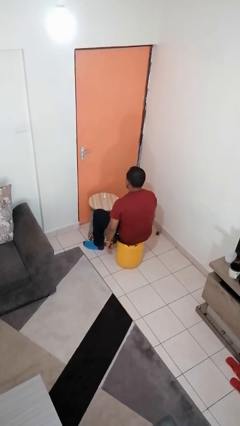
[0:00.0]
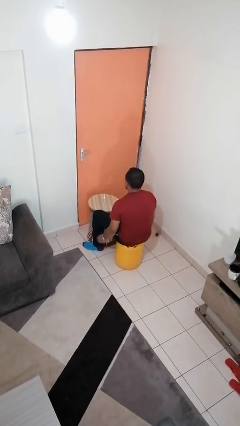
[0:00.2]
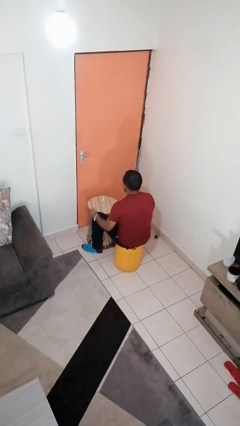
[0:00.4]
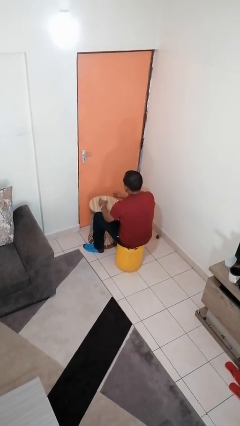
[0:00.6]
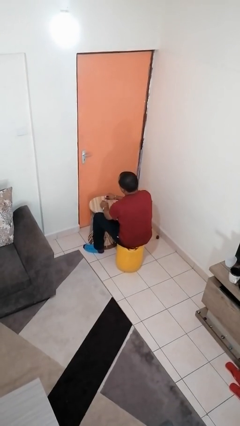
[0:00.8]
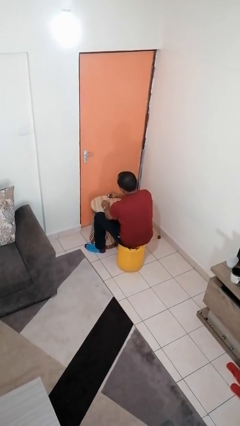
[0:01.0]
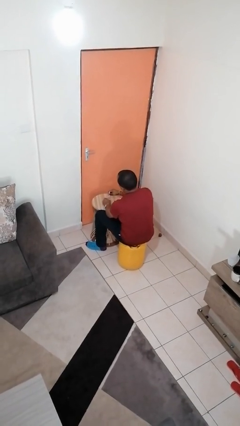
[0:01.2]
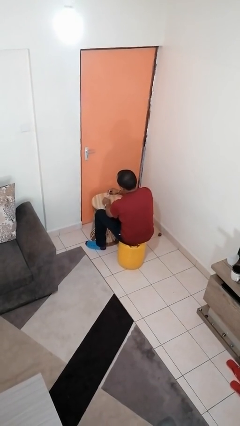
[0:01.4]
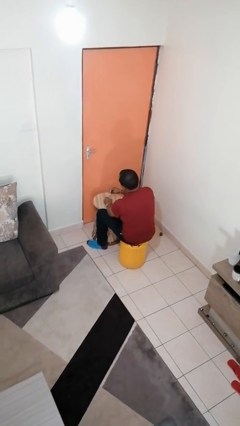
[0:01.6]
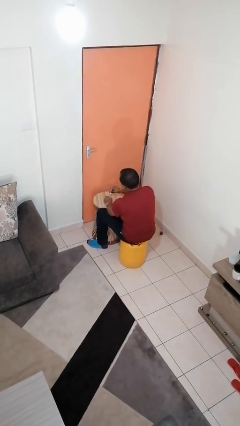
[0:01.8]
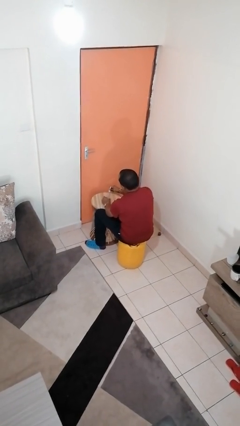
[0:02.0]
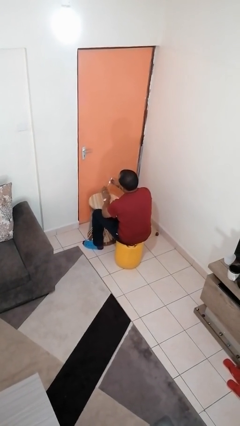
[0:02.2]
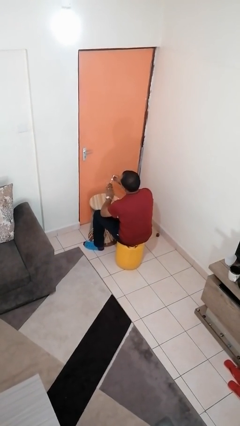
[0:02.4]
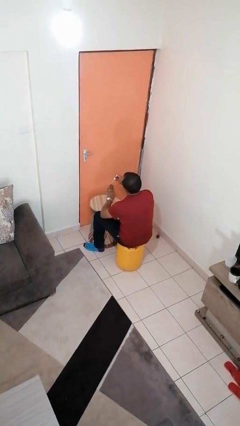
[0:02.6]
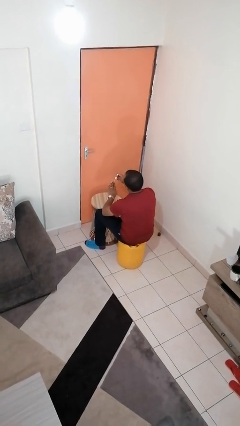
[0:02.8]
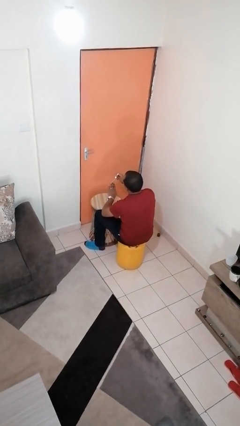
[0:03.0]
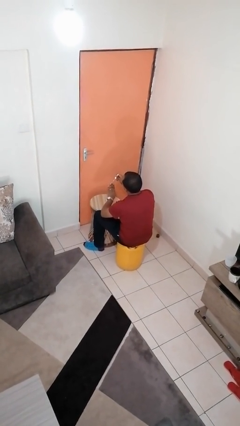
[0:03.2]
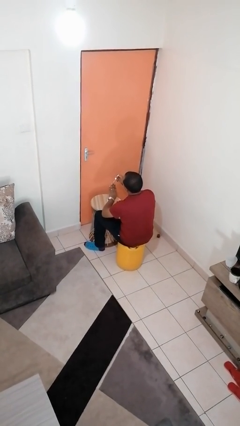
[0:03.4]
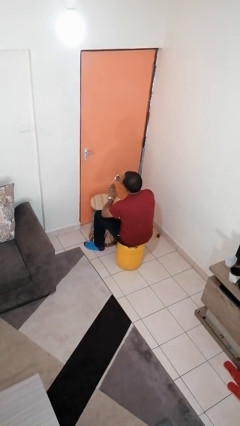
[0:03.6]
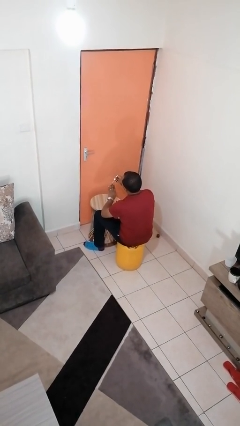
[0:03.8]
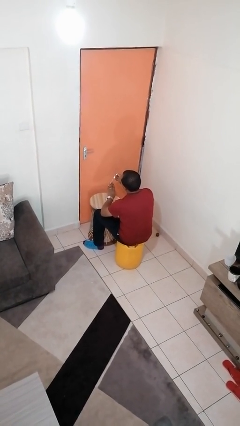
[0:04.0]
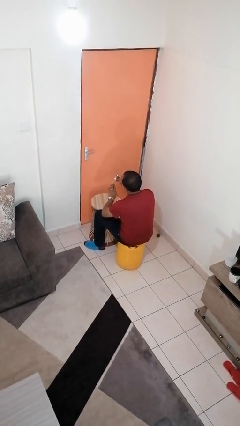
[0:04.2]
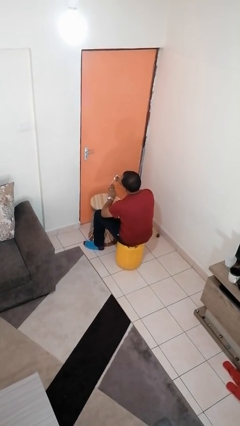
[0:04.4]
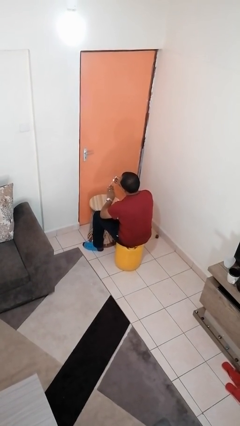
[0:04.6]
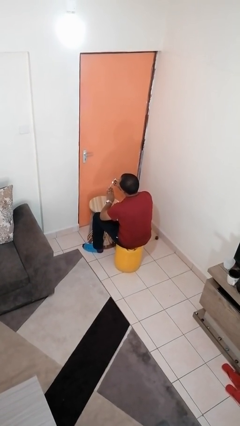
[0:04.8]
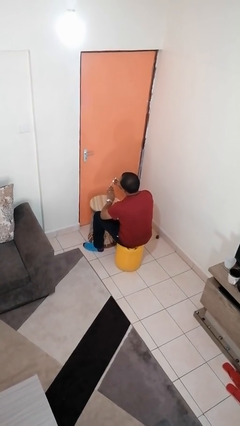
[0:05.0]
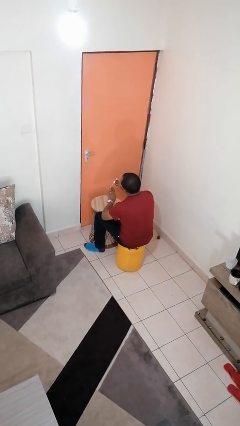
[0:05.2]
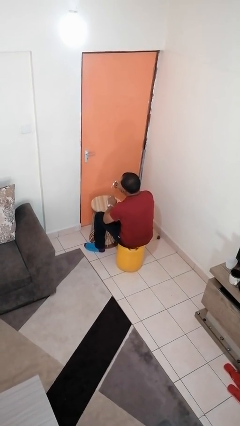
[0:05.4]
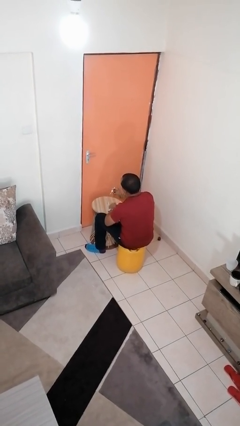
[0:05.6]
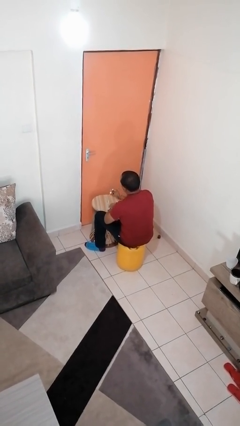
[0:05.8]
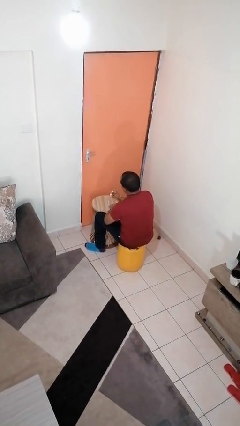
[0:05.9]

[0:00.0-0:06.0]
person paints fingernails

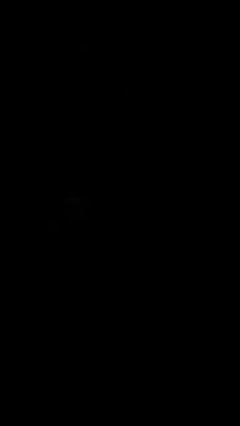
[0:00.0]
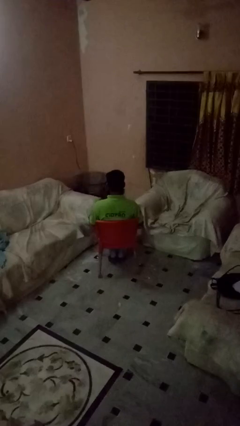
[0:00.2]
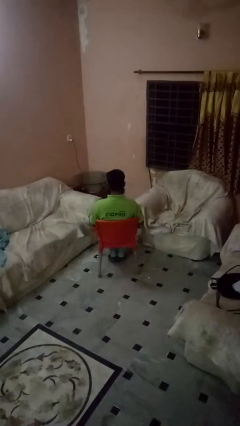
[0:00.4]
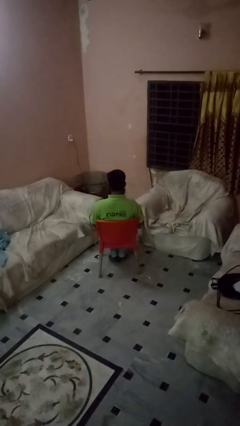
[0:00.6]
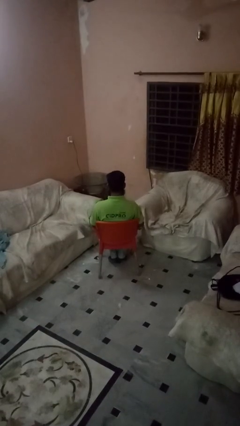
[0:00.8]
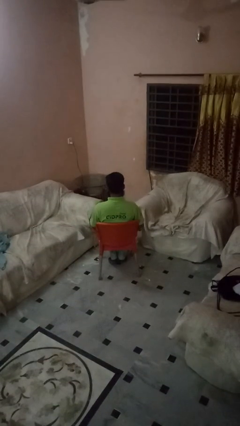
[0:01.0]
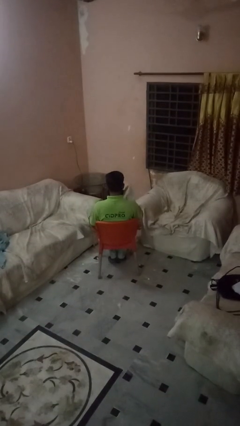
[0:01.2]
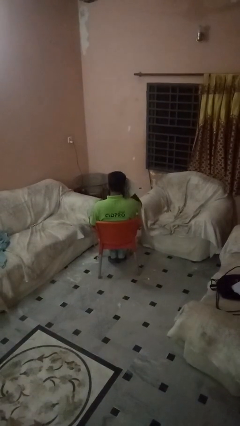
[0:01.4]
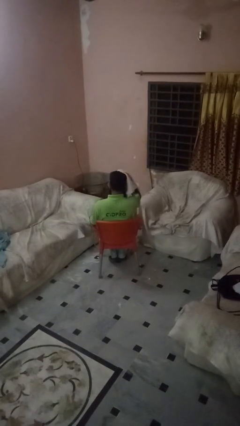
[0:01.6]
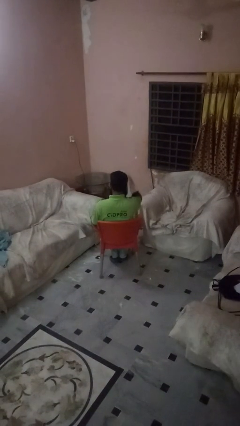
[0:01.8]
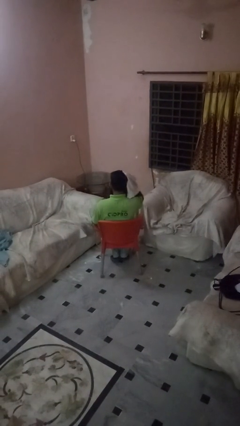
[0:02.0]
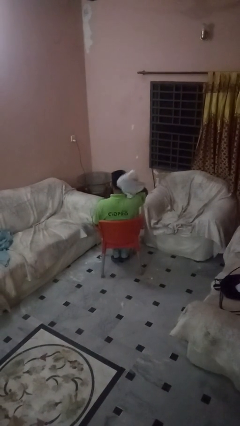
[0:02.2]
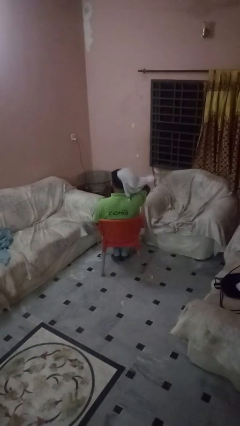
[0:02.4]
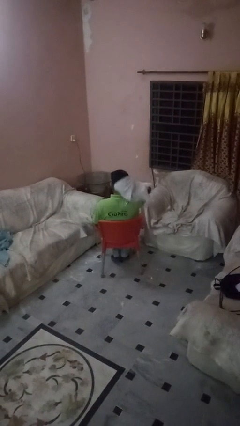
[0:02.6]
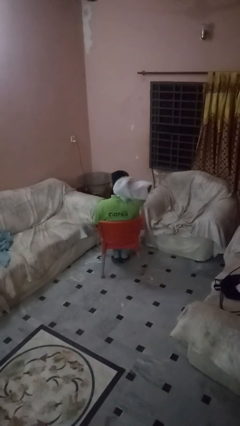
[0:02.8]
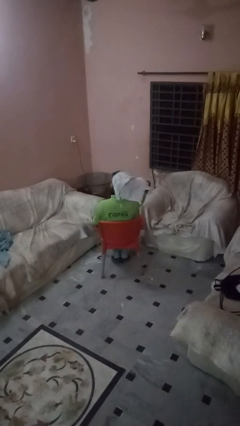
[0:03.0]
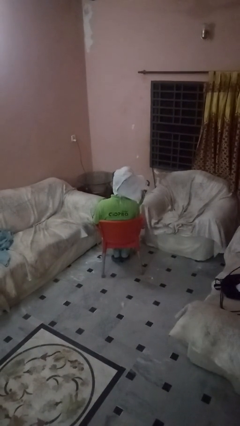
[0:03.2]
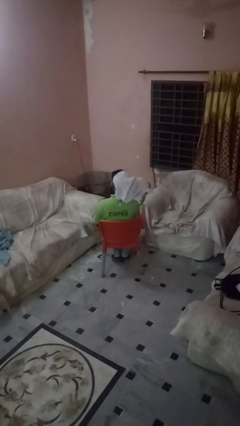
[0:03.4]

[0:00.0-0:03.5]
person dries hair with towel

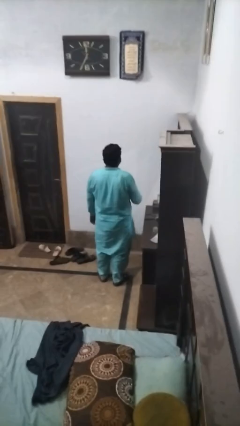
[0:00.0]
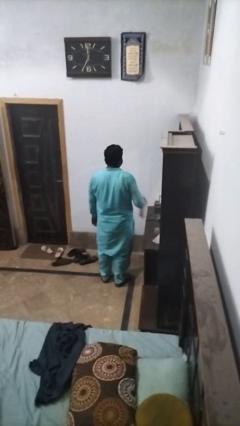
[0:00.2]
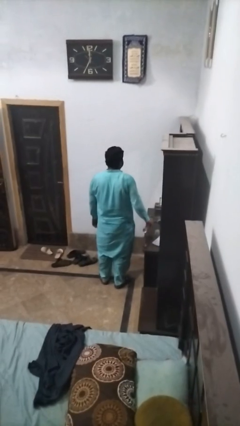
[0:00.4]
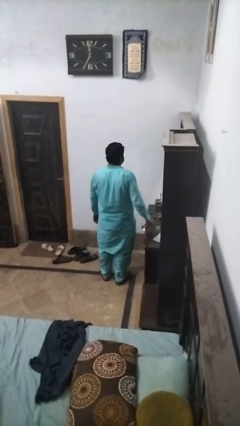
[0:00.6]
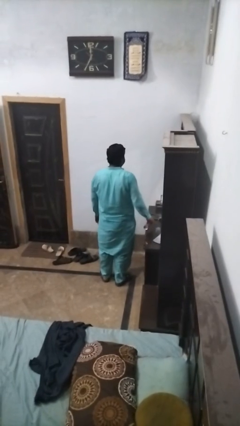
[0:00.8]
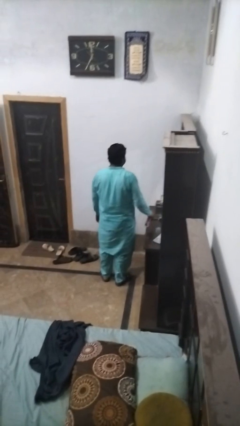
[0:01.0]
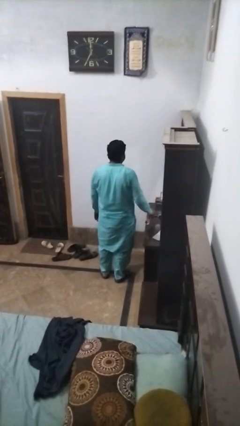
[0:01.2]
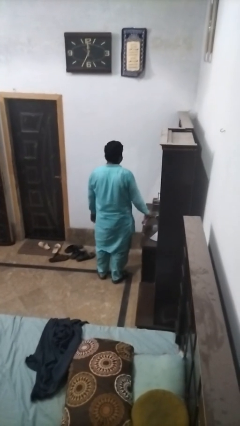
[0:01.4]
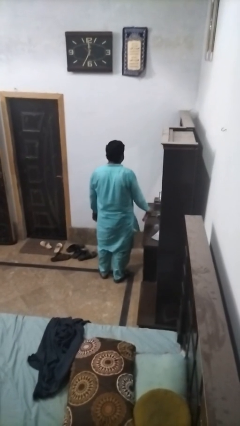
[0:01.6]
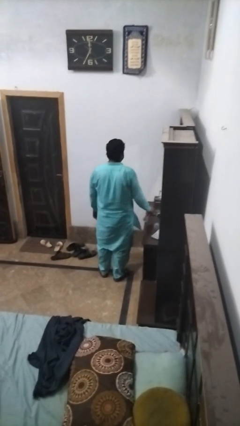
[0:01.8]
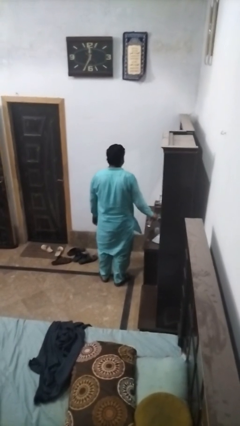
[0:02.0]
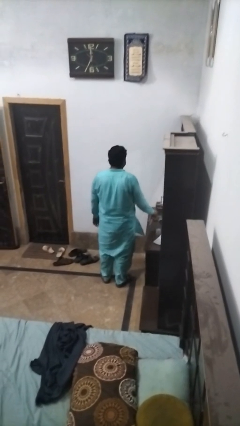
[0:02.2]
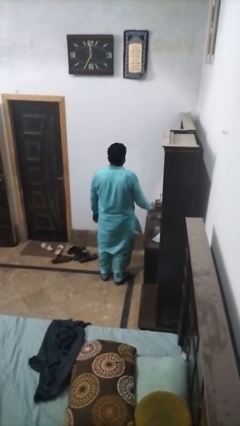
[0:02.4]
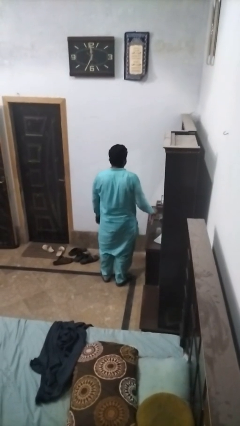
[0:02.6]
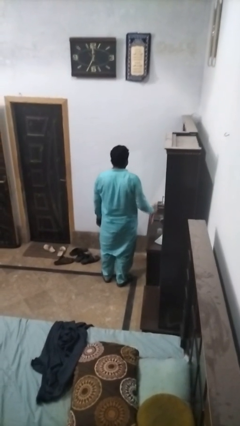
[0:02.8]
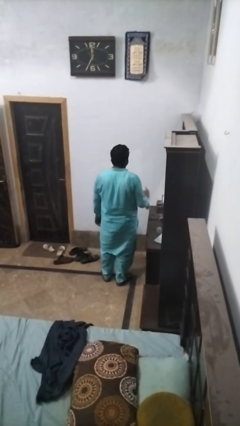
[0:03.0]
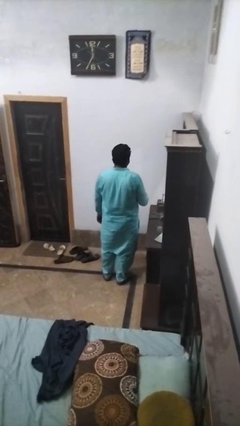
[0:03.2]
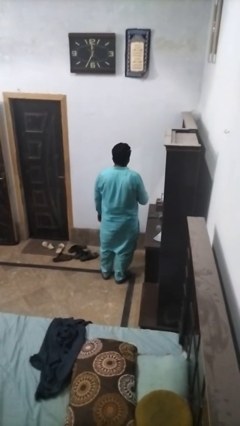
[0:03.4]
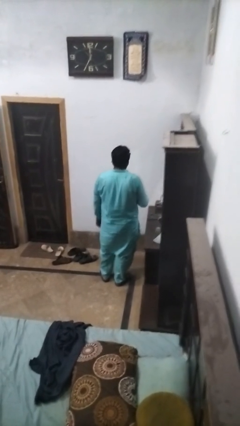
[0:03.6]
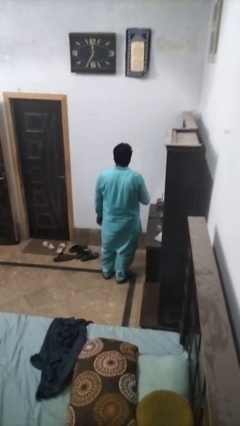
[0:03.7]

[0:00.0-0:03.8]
person sprays from bottle

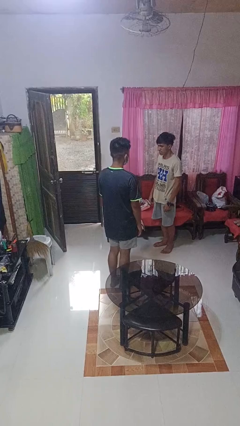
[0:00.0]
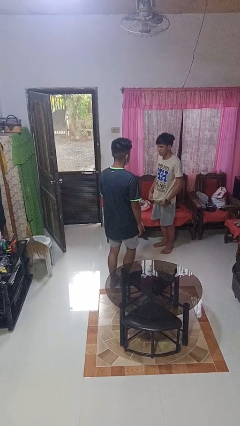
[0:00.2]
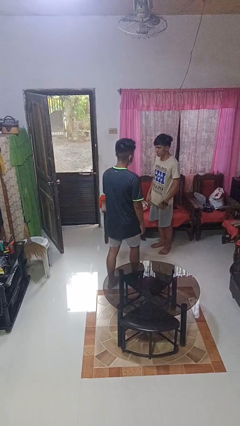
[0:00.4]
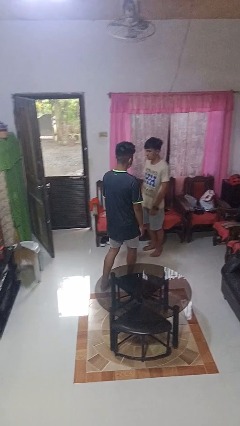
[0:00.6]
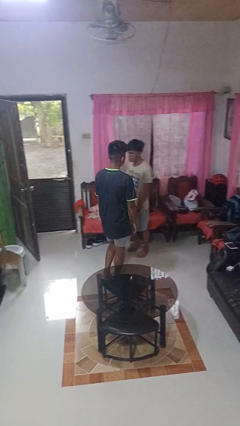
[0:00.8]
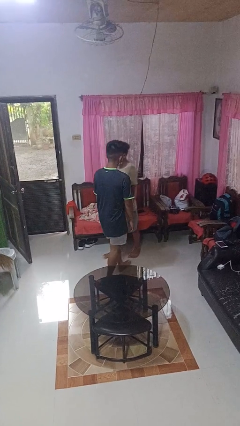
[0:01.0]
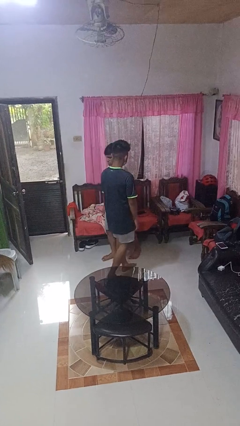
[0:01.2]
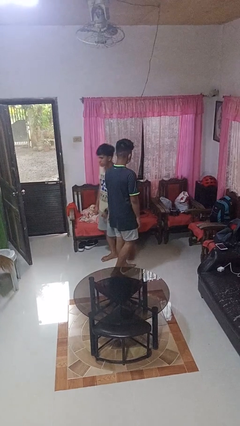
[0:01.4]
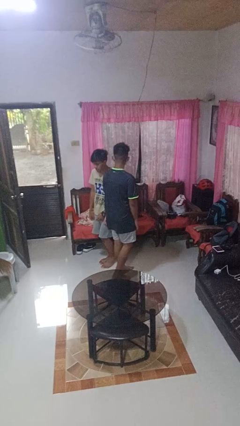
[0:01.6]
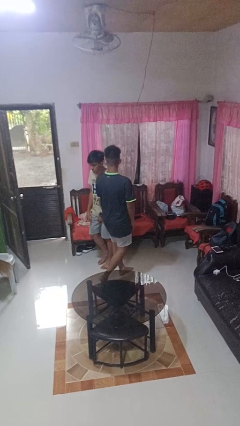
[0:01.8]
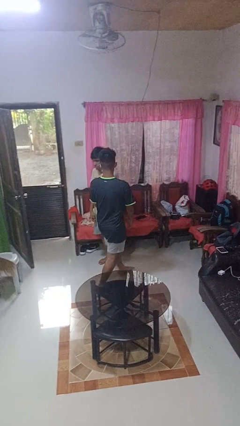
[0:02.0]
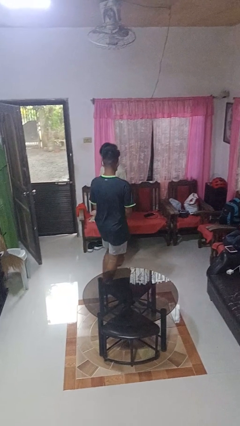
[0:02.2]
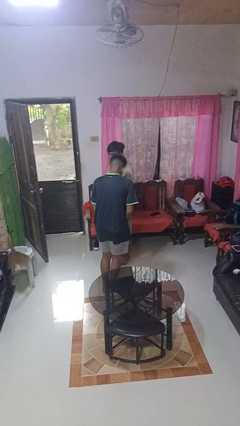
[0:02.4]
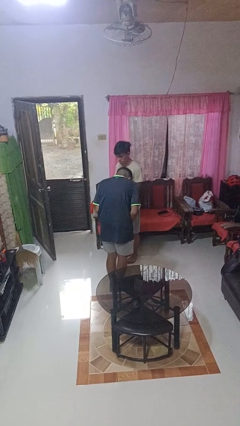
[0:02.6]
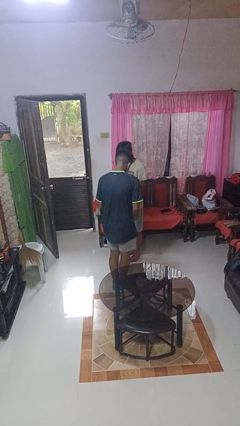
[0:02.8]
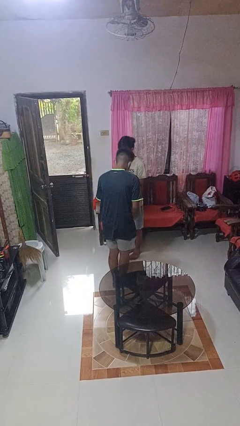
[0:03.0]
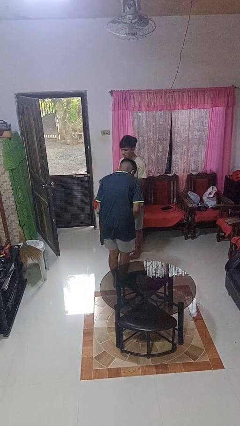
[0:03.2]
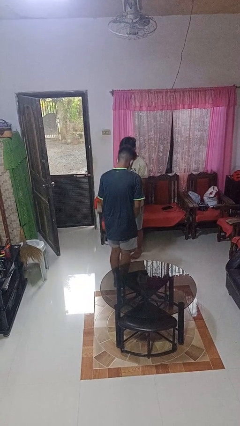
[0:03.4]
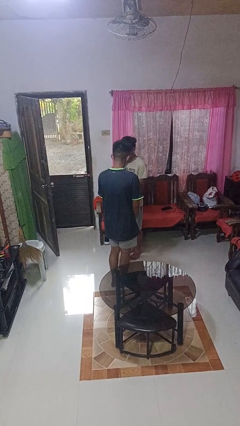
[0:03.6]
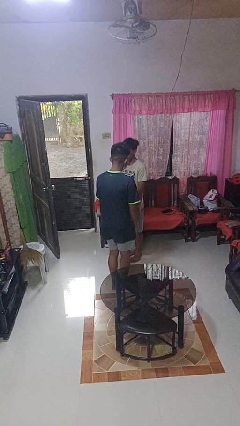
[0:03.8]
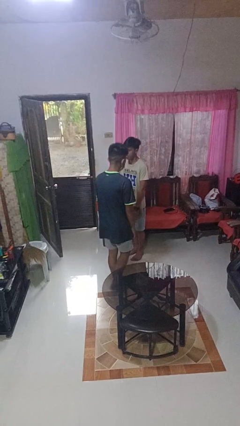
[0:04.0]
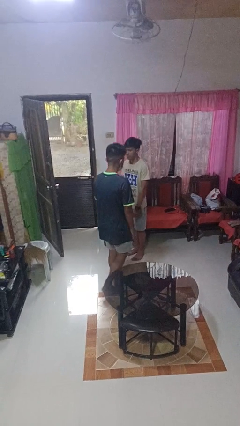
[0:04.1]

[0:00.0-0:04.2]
person bumps into person

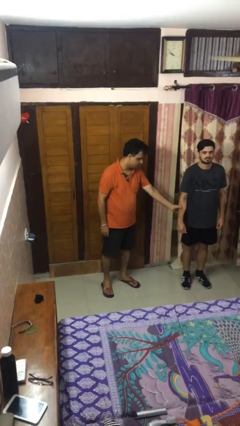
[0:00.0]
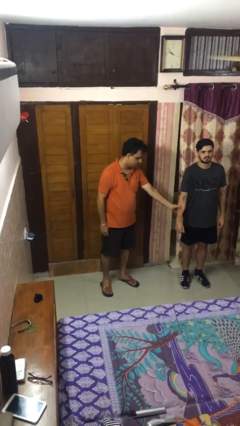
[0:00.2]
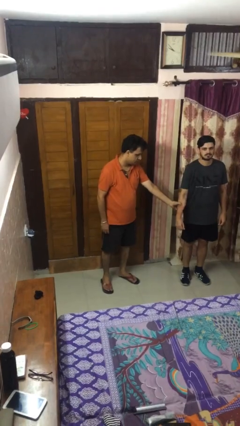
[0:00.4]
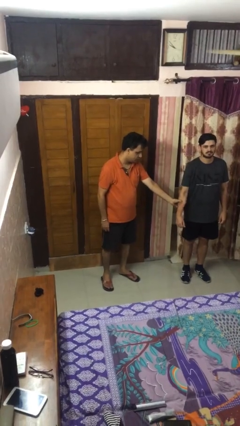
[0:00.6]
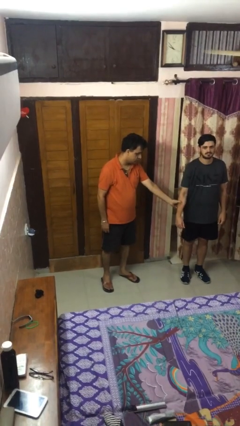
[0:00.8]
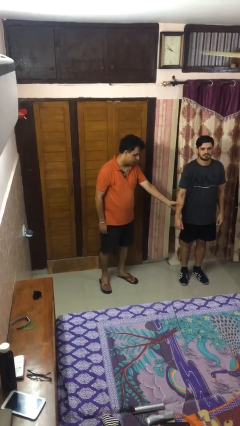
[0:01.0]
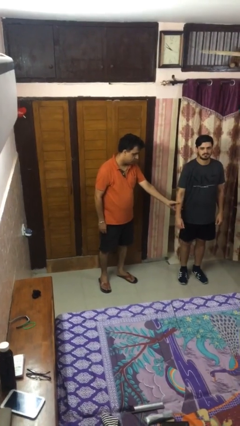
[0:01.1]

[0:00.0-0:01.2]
person grabs person by forearm
